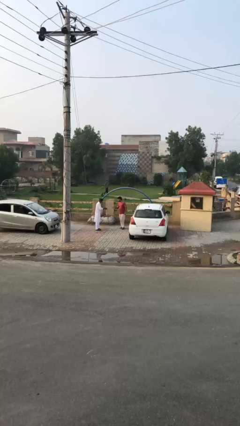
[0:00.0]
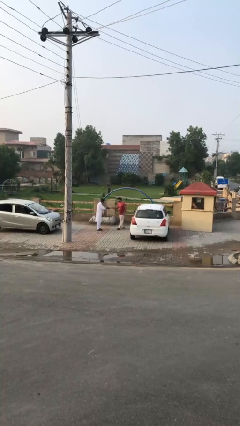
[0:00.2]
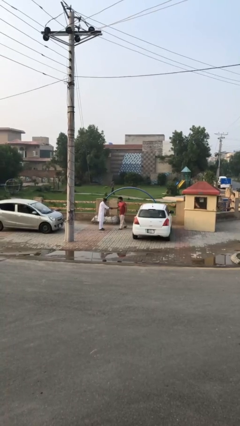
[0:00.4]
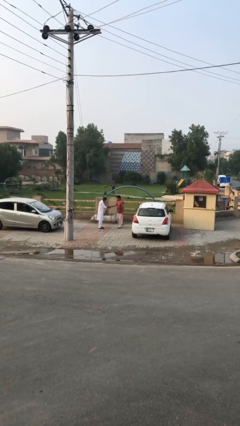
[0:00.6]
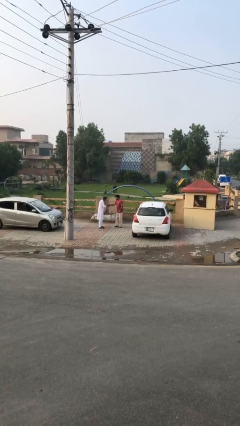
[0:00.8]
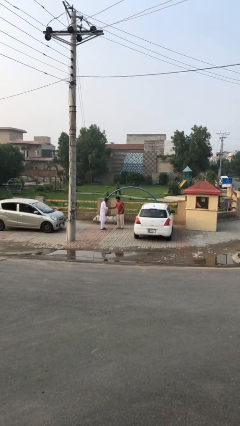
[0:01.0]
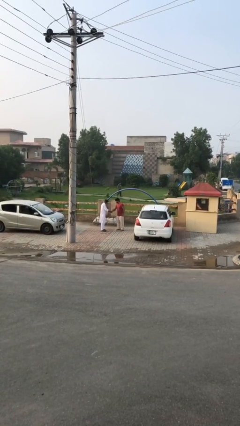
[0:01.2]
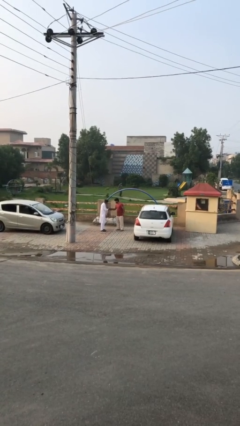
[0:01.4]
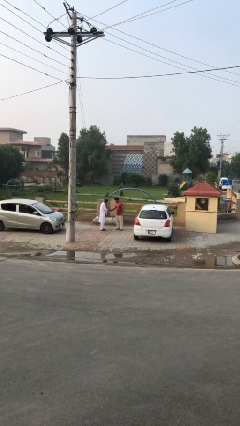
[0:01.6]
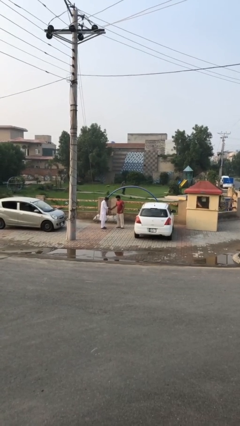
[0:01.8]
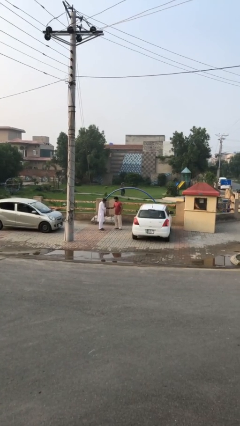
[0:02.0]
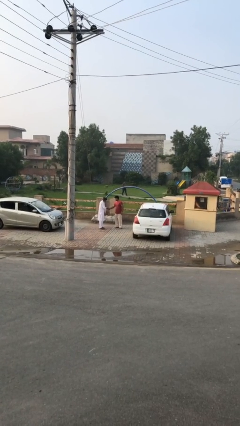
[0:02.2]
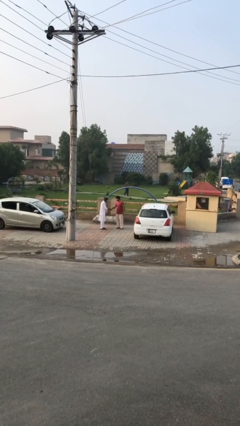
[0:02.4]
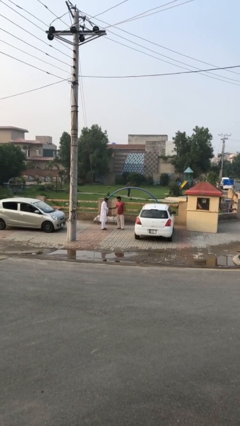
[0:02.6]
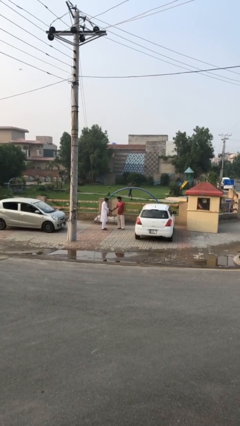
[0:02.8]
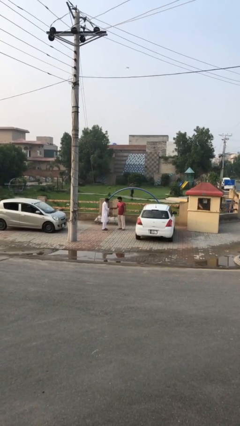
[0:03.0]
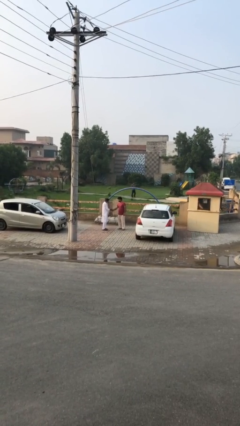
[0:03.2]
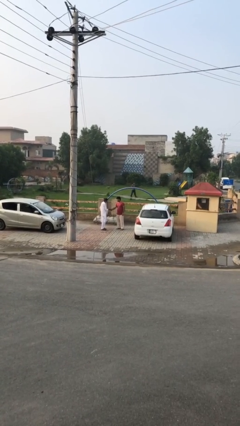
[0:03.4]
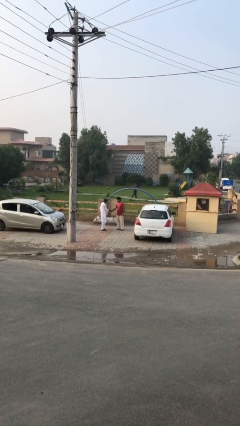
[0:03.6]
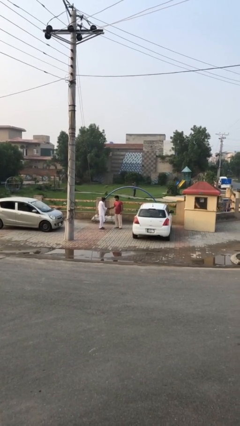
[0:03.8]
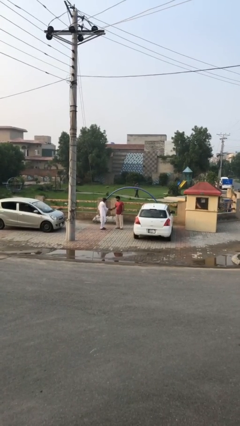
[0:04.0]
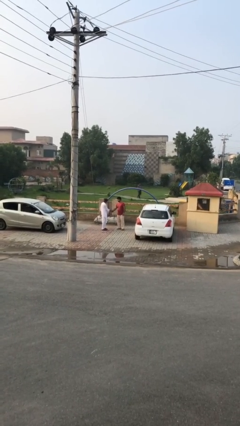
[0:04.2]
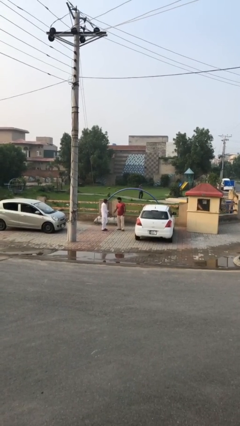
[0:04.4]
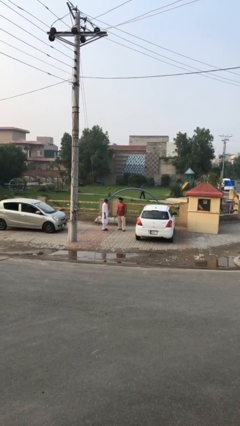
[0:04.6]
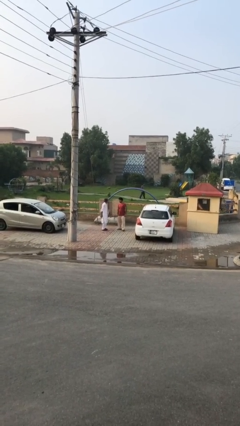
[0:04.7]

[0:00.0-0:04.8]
person shakes hand

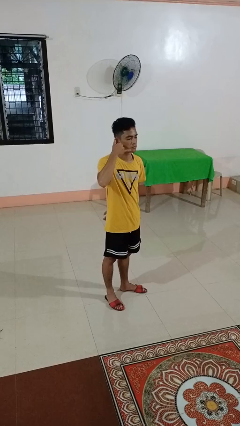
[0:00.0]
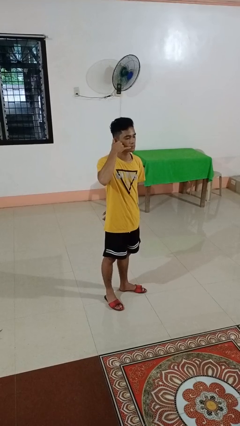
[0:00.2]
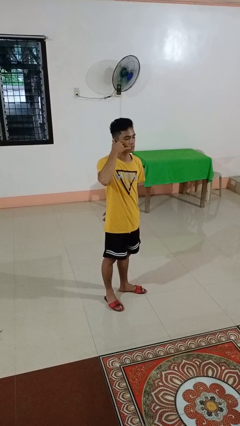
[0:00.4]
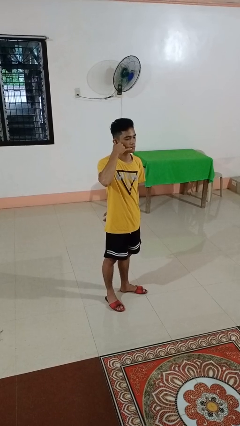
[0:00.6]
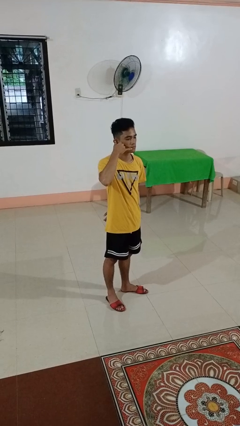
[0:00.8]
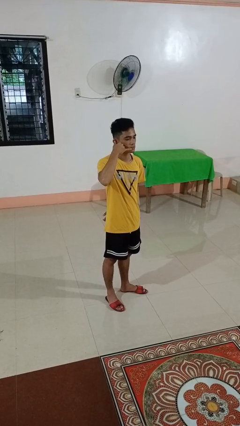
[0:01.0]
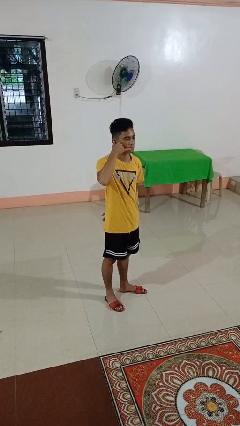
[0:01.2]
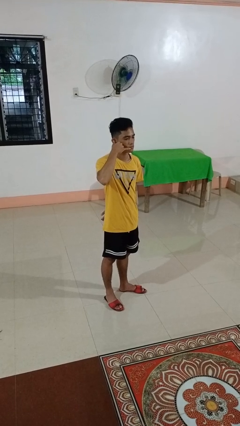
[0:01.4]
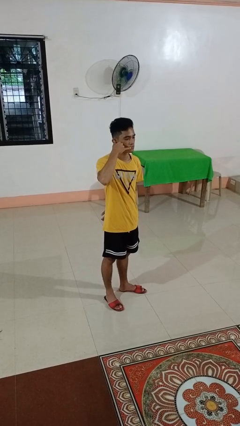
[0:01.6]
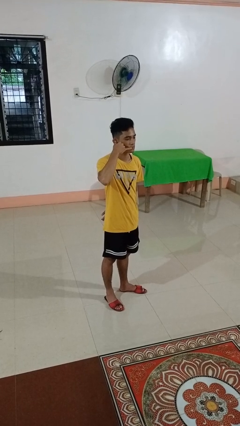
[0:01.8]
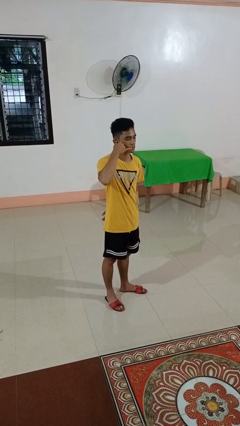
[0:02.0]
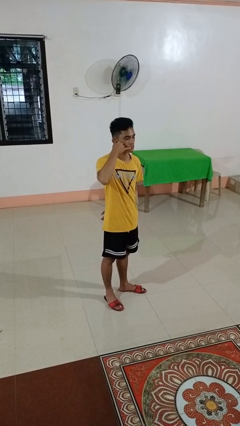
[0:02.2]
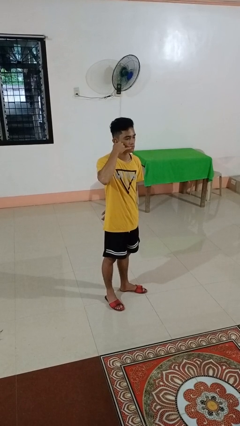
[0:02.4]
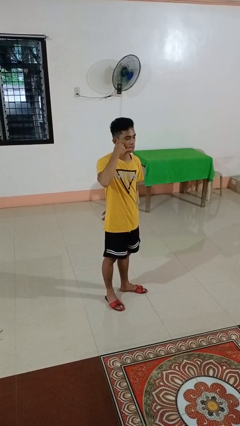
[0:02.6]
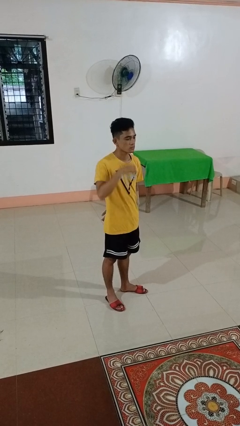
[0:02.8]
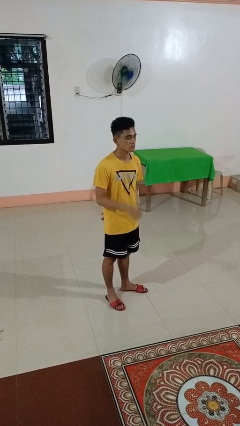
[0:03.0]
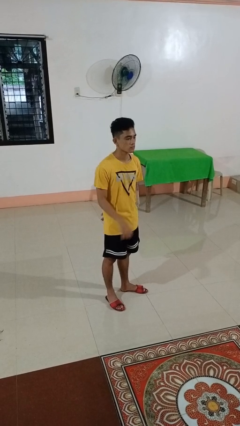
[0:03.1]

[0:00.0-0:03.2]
person gestures call me

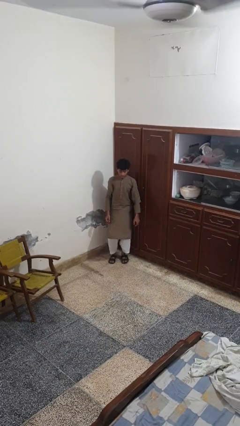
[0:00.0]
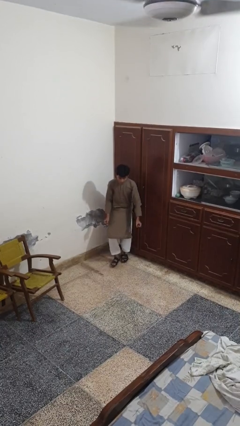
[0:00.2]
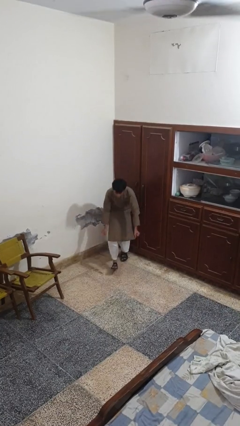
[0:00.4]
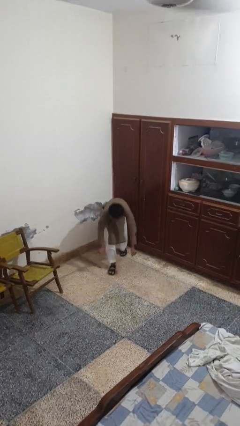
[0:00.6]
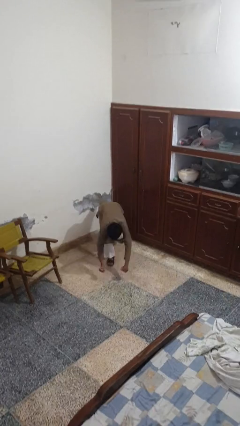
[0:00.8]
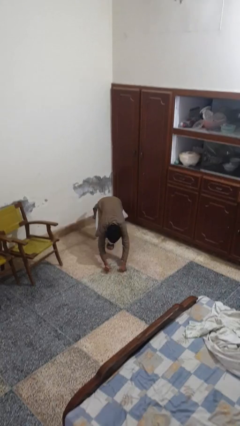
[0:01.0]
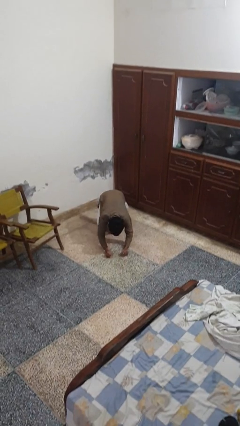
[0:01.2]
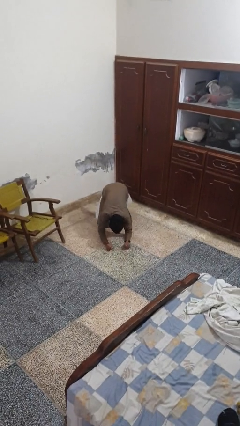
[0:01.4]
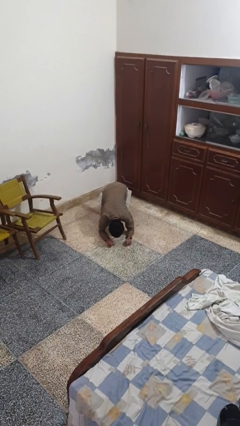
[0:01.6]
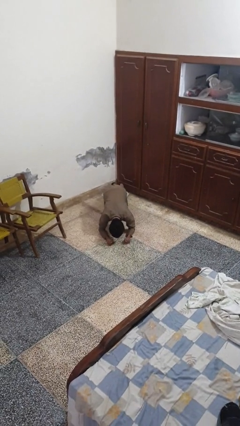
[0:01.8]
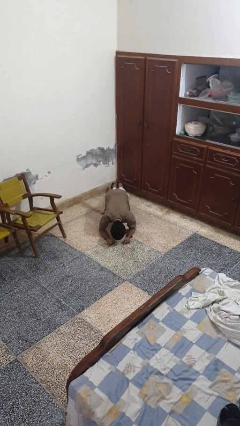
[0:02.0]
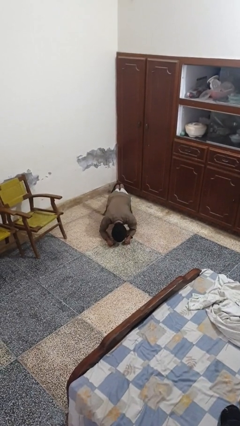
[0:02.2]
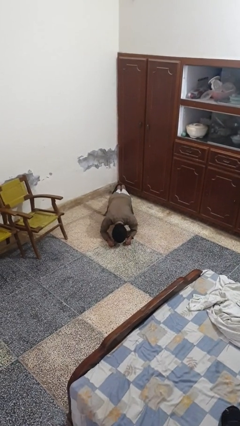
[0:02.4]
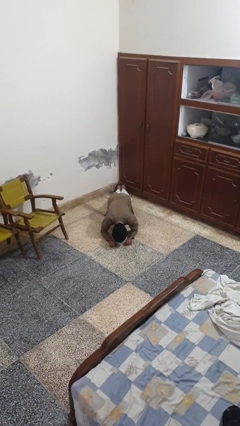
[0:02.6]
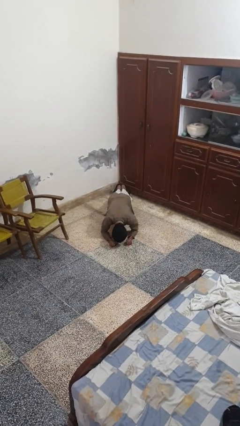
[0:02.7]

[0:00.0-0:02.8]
person exercises with plank

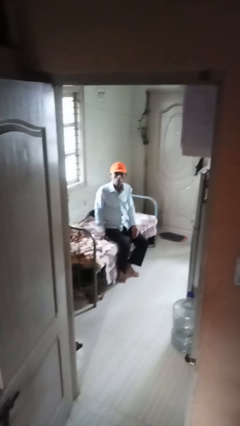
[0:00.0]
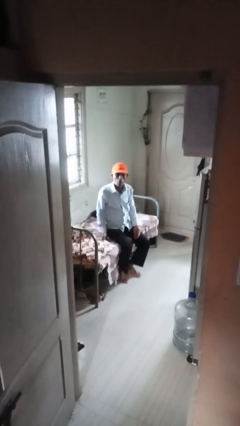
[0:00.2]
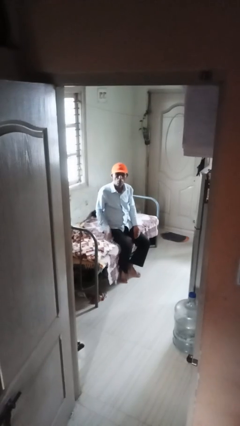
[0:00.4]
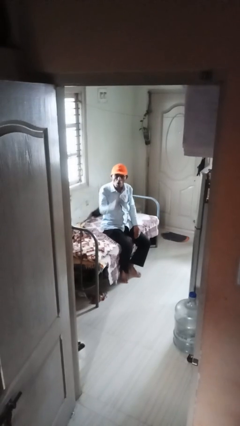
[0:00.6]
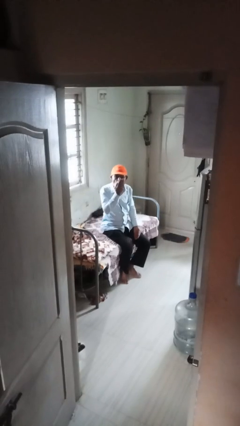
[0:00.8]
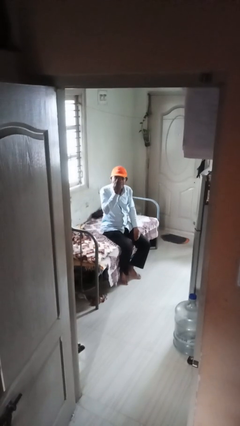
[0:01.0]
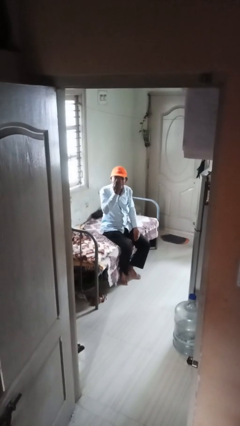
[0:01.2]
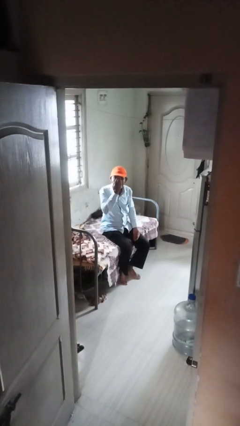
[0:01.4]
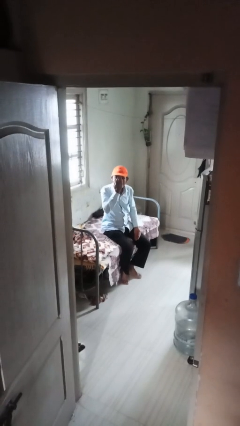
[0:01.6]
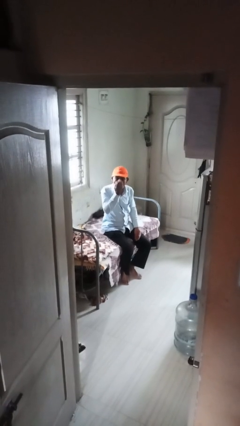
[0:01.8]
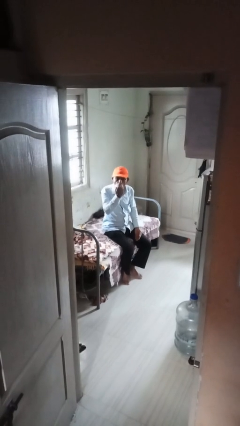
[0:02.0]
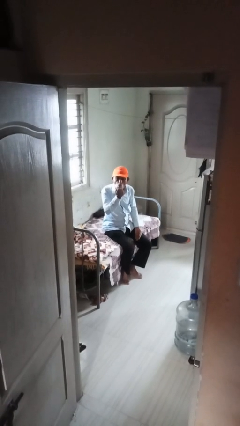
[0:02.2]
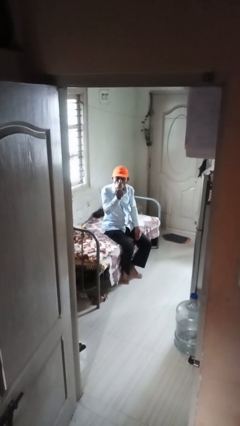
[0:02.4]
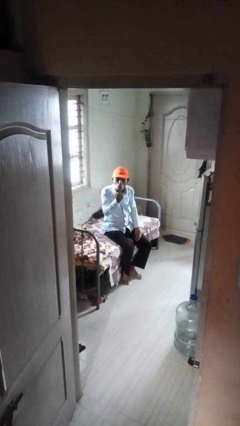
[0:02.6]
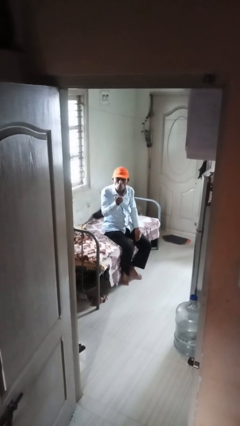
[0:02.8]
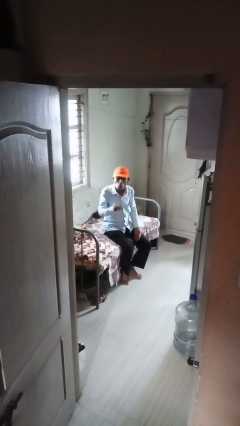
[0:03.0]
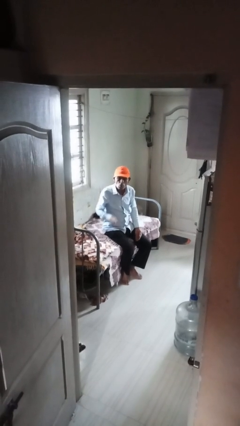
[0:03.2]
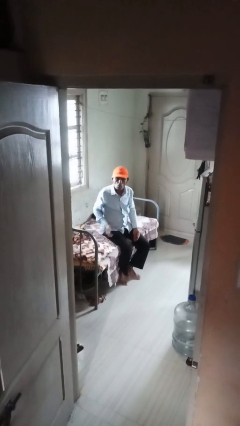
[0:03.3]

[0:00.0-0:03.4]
person gestures blow kiss

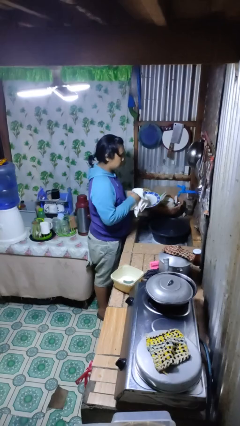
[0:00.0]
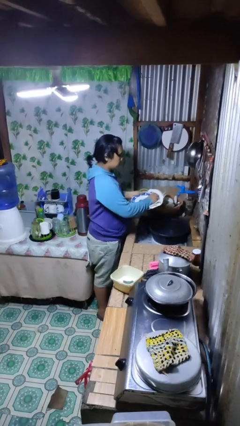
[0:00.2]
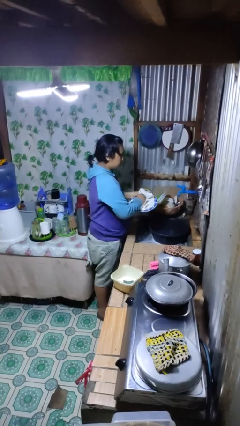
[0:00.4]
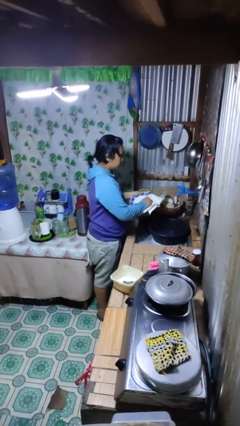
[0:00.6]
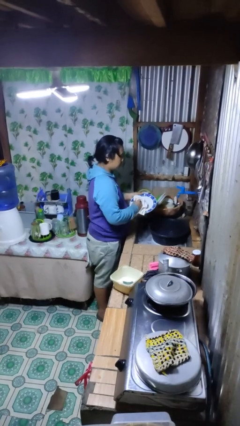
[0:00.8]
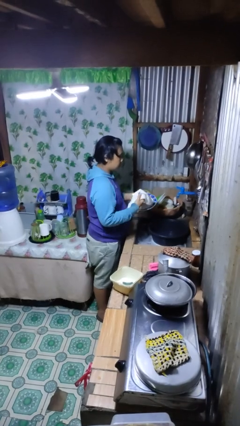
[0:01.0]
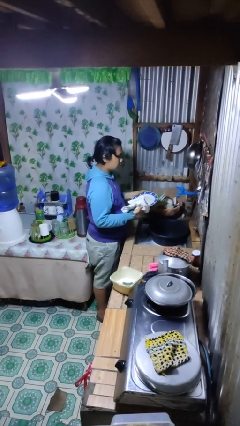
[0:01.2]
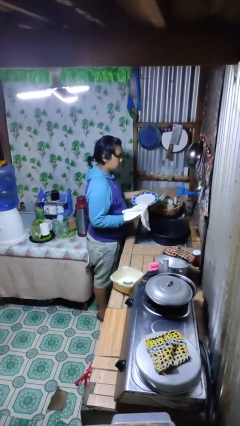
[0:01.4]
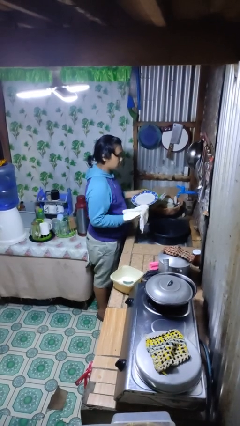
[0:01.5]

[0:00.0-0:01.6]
person dries dish

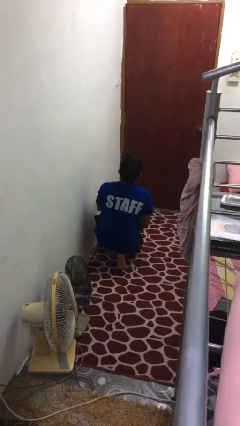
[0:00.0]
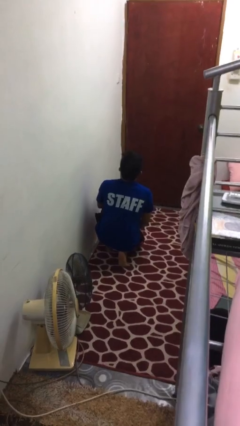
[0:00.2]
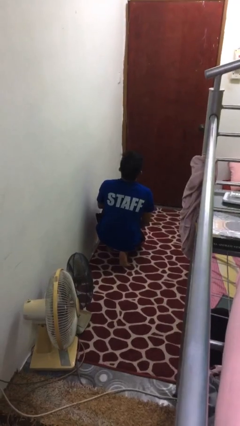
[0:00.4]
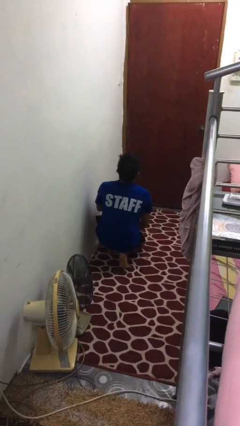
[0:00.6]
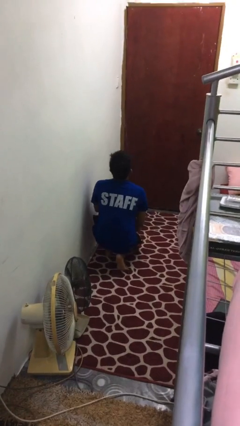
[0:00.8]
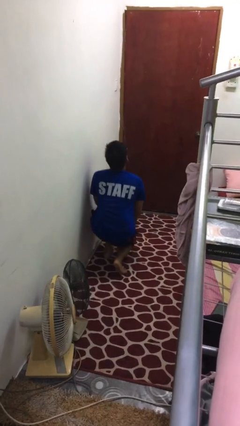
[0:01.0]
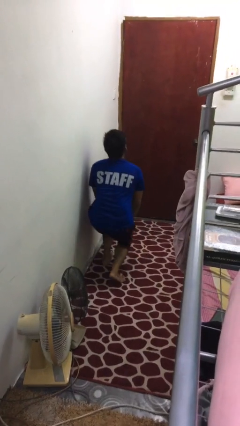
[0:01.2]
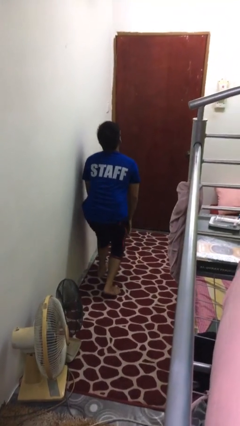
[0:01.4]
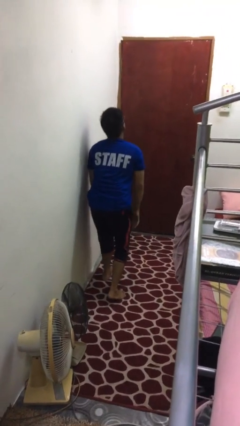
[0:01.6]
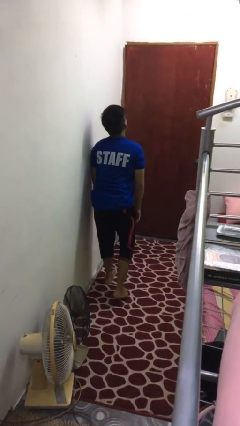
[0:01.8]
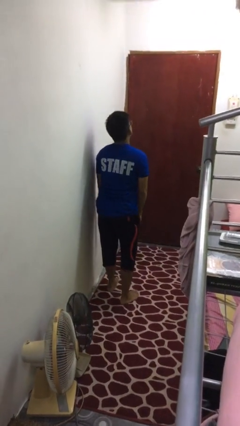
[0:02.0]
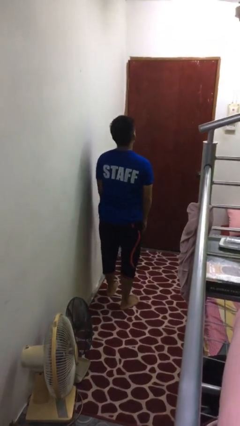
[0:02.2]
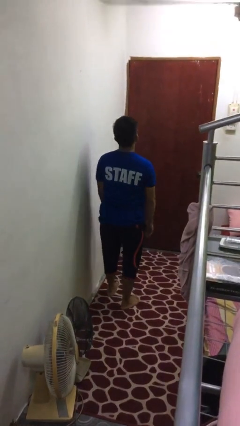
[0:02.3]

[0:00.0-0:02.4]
person stands up from floor
